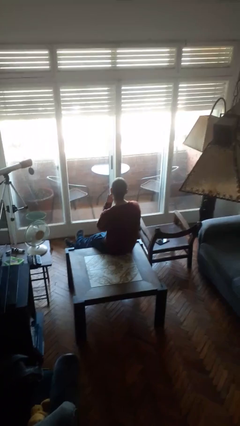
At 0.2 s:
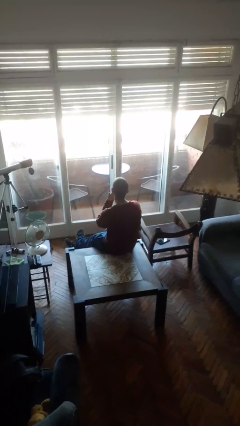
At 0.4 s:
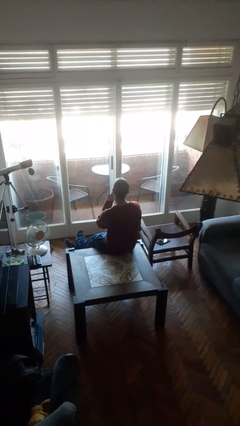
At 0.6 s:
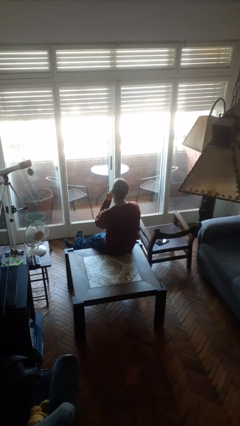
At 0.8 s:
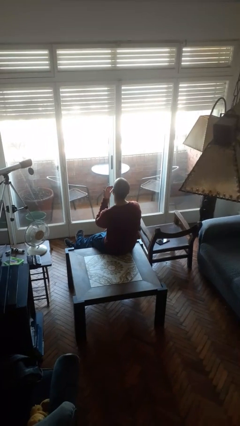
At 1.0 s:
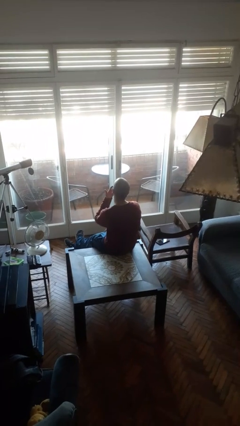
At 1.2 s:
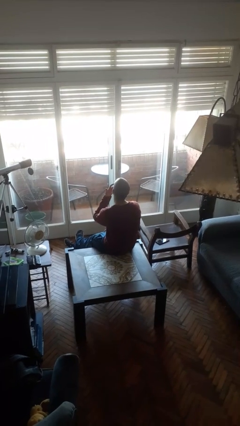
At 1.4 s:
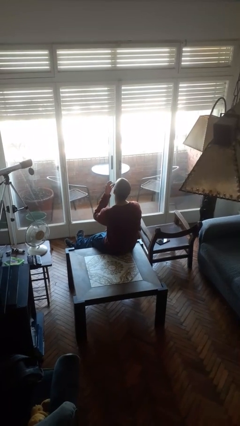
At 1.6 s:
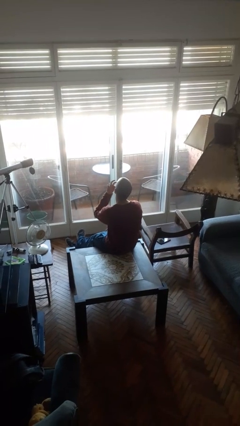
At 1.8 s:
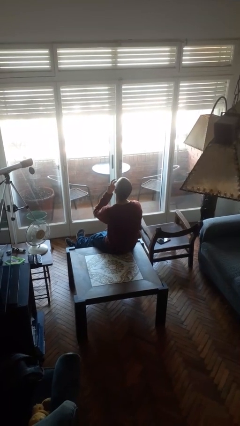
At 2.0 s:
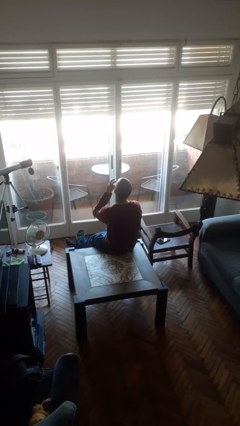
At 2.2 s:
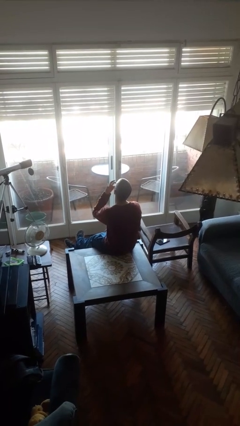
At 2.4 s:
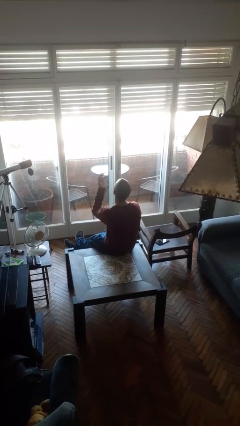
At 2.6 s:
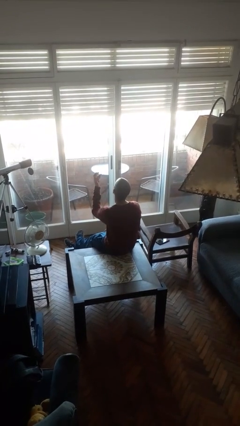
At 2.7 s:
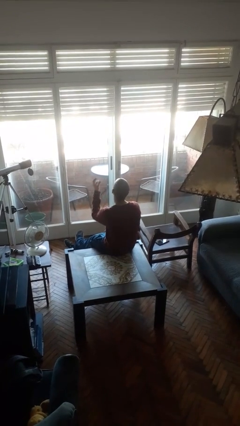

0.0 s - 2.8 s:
person licks fingers

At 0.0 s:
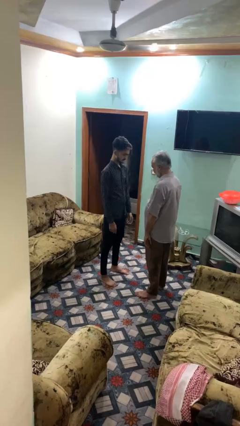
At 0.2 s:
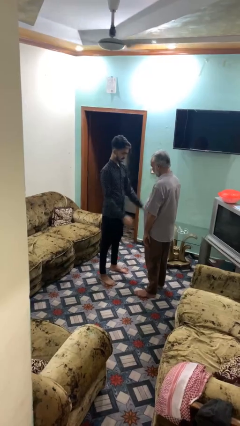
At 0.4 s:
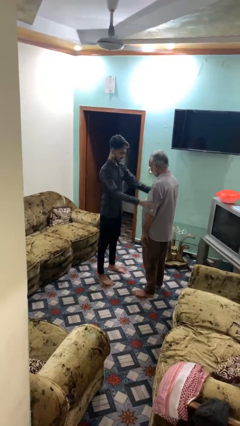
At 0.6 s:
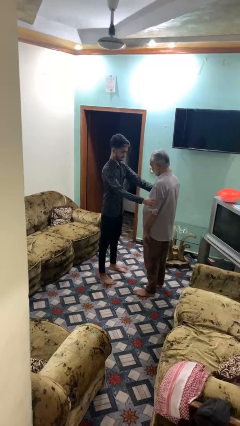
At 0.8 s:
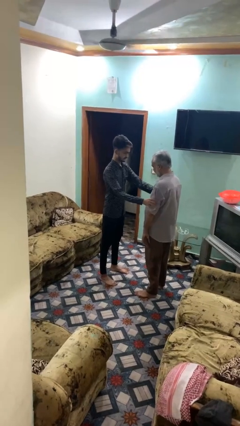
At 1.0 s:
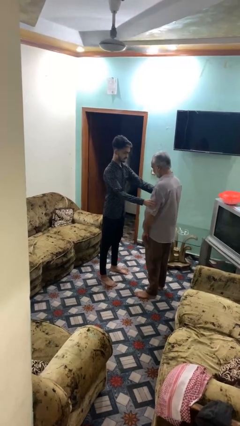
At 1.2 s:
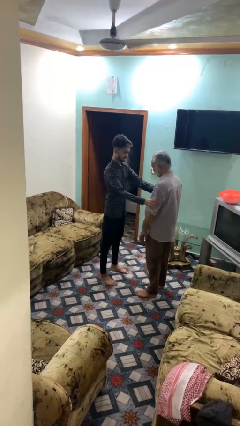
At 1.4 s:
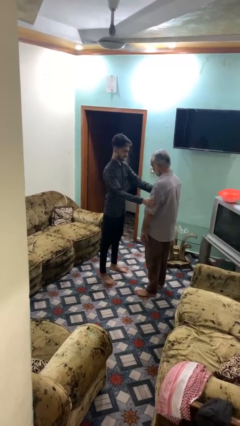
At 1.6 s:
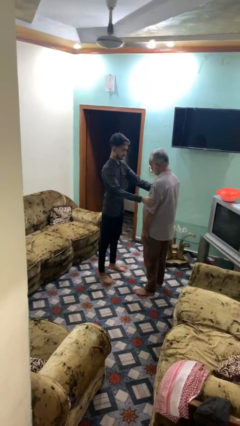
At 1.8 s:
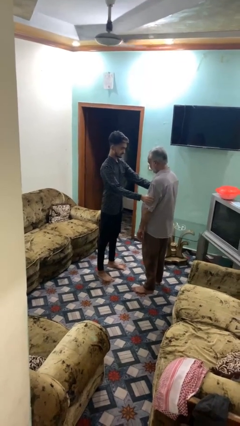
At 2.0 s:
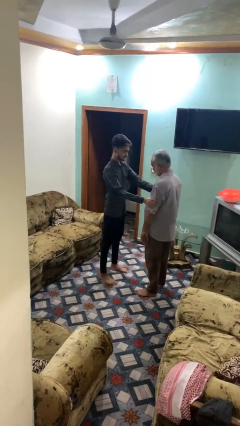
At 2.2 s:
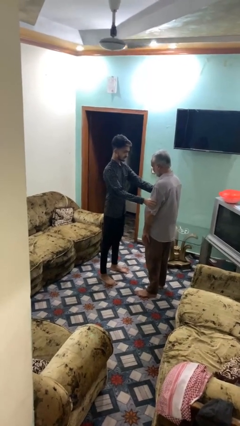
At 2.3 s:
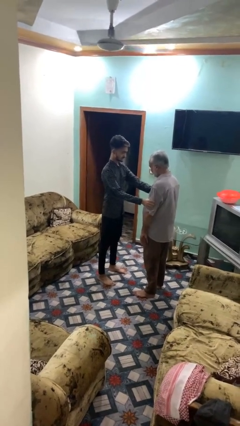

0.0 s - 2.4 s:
person grabs person by bicep

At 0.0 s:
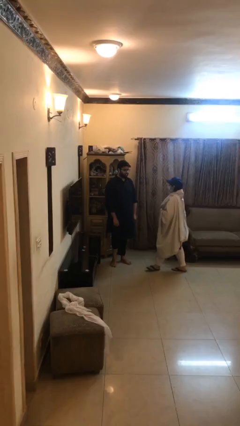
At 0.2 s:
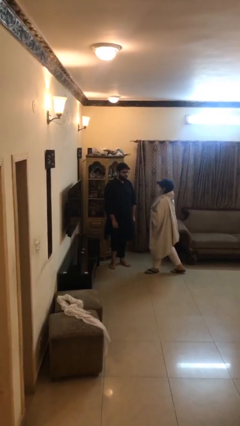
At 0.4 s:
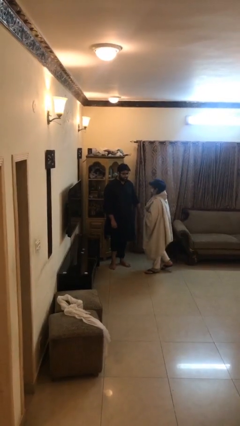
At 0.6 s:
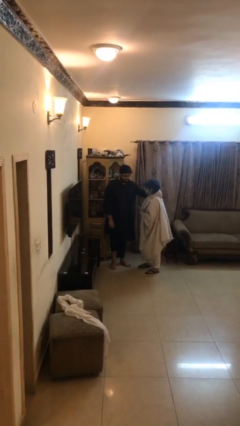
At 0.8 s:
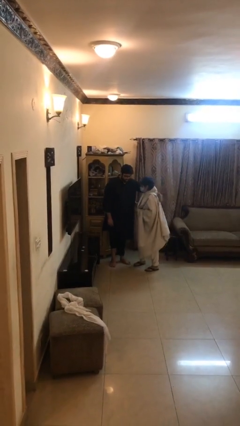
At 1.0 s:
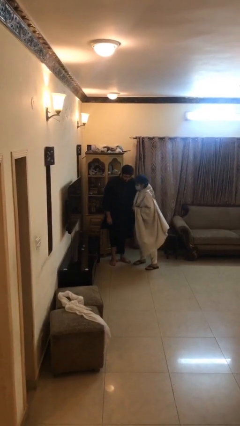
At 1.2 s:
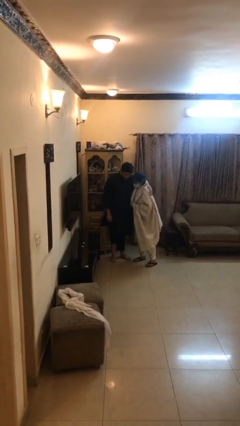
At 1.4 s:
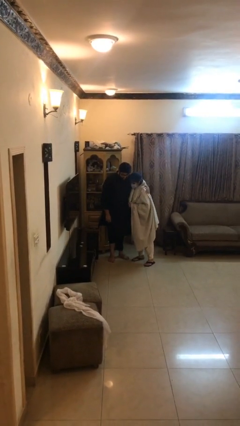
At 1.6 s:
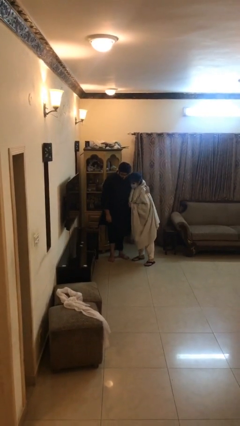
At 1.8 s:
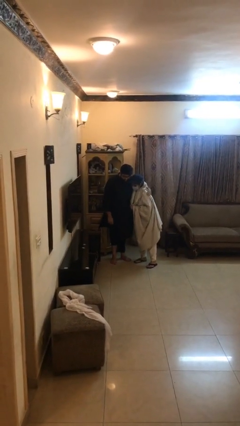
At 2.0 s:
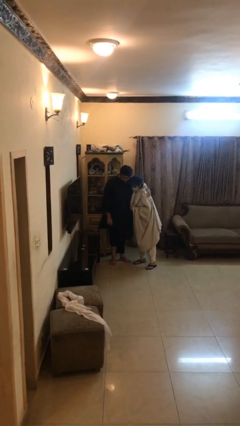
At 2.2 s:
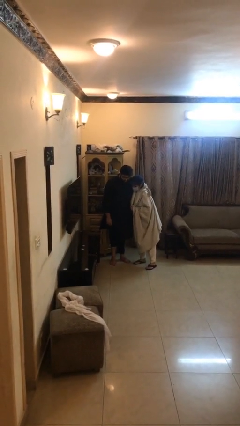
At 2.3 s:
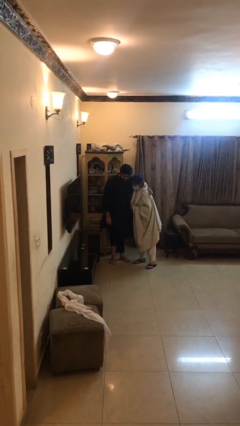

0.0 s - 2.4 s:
person embraces person

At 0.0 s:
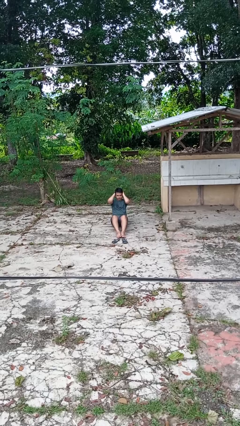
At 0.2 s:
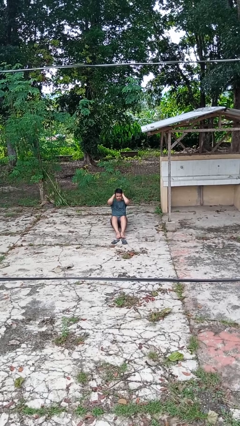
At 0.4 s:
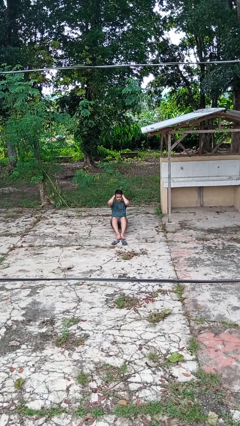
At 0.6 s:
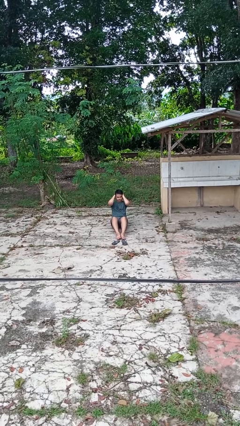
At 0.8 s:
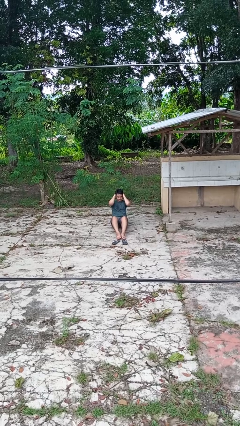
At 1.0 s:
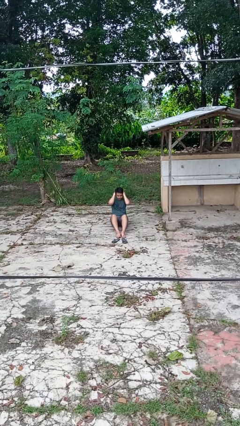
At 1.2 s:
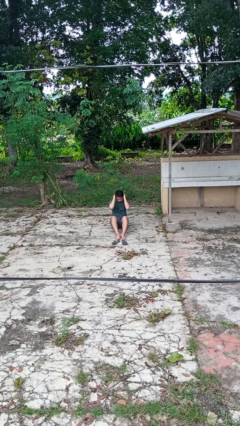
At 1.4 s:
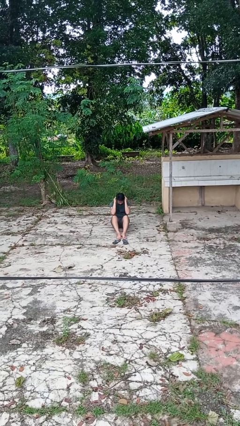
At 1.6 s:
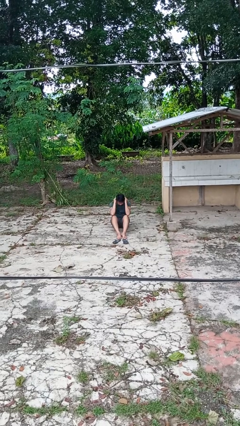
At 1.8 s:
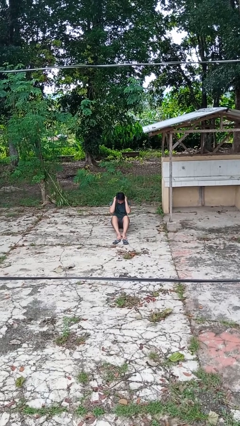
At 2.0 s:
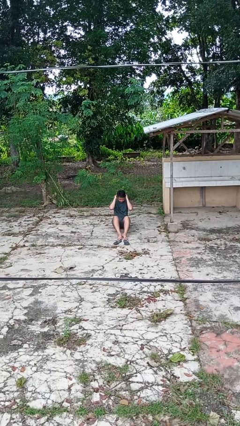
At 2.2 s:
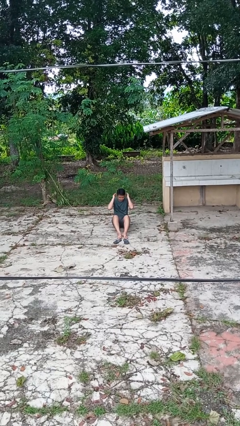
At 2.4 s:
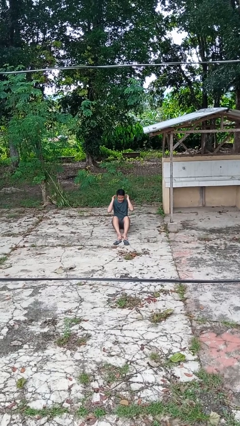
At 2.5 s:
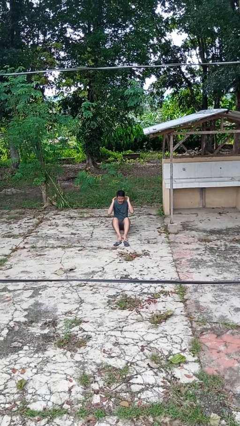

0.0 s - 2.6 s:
person exercises with situp

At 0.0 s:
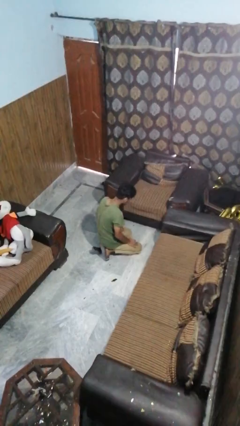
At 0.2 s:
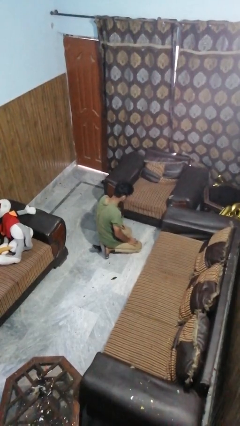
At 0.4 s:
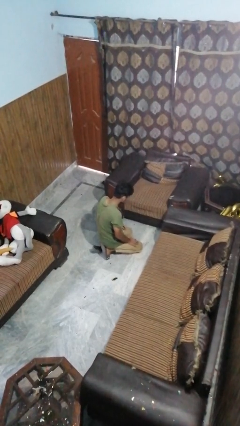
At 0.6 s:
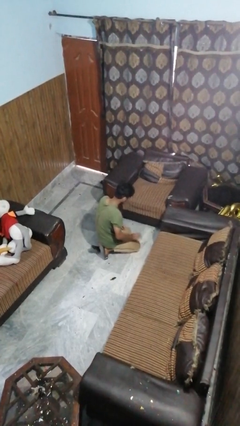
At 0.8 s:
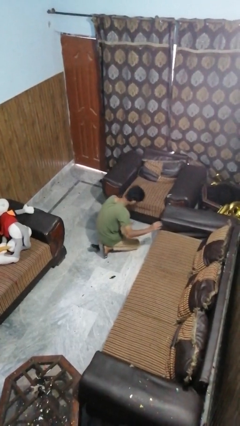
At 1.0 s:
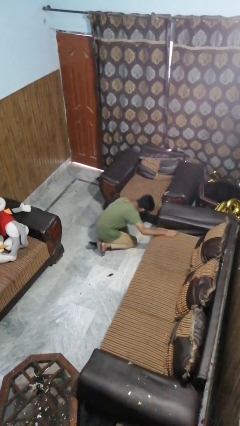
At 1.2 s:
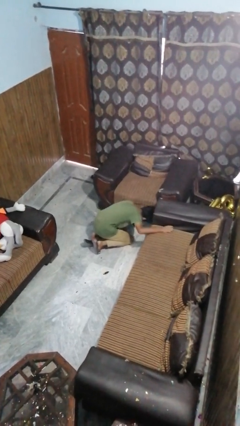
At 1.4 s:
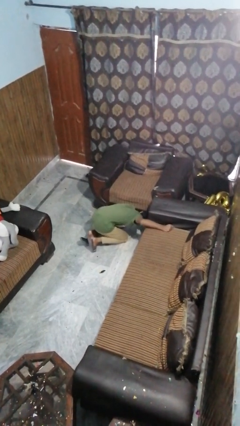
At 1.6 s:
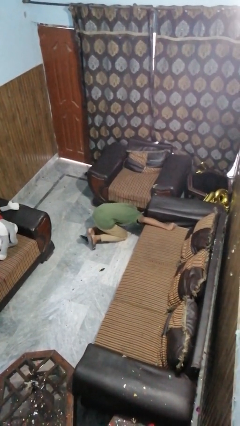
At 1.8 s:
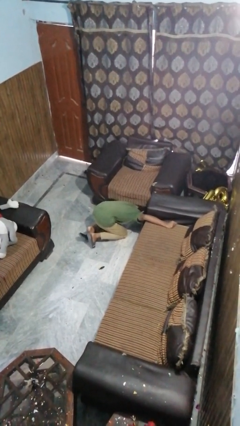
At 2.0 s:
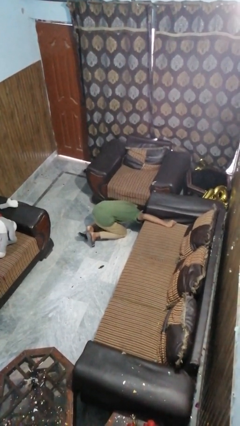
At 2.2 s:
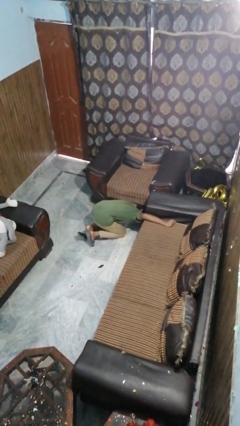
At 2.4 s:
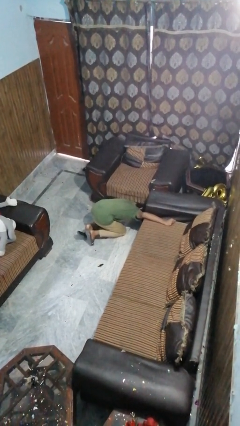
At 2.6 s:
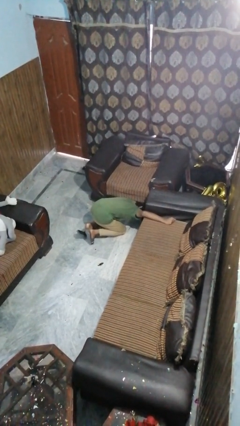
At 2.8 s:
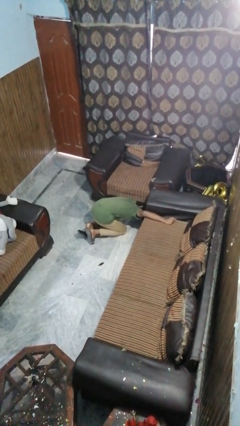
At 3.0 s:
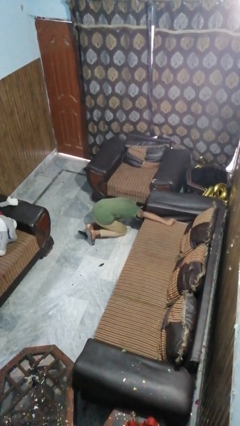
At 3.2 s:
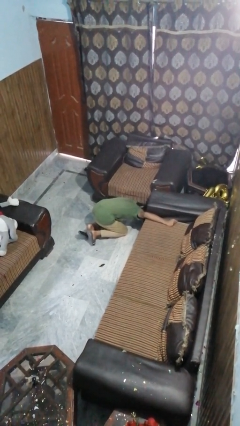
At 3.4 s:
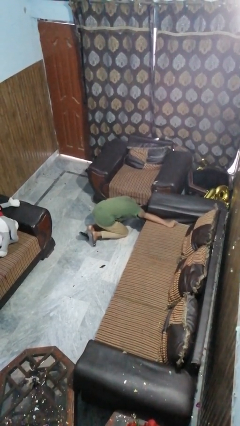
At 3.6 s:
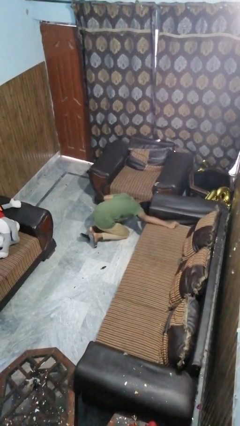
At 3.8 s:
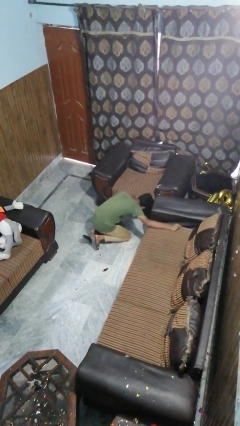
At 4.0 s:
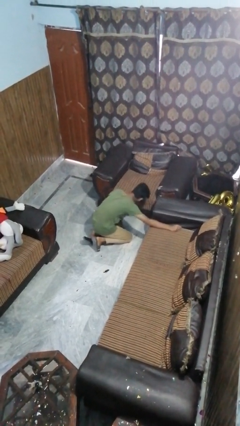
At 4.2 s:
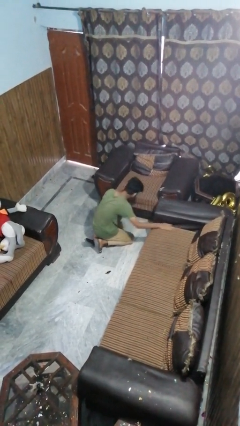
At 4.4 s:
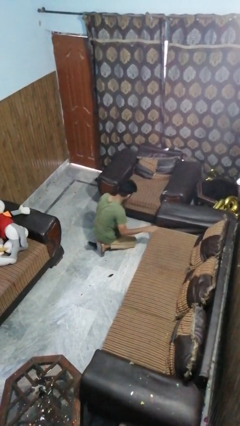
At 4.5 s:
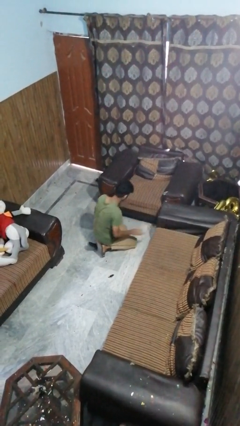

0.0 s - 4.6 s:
person searches under couch

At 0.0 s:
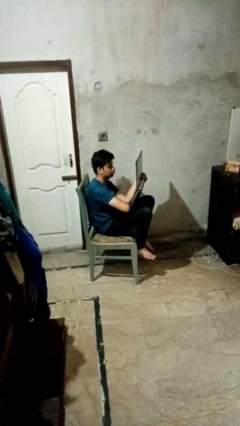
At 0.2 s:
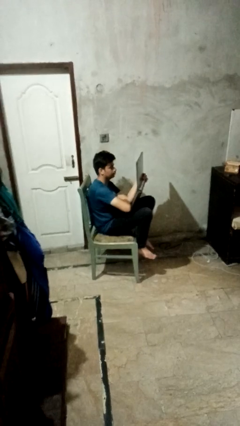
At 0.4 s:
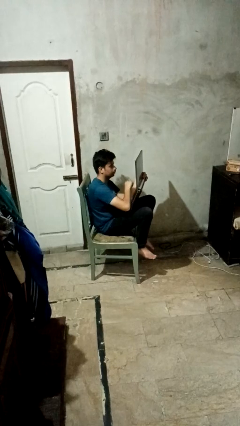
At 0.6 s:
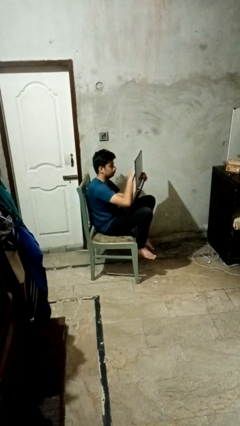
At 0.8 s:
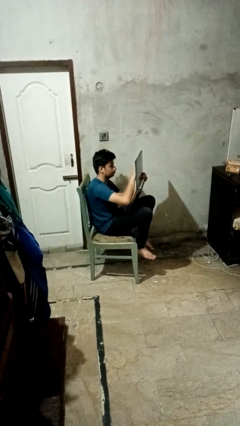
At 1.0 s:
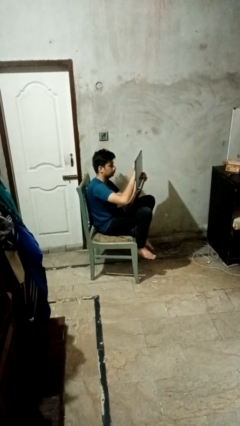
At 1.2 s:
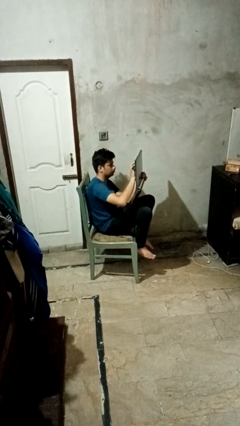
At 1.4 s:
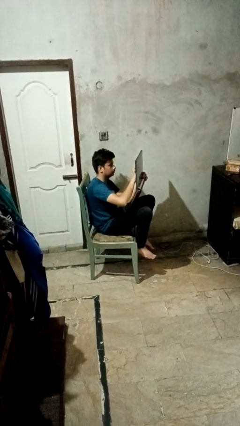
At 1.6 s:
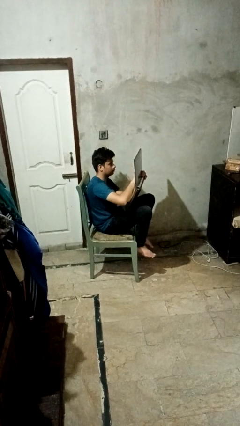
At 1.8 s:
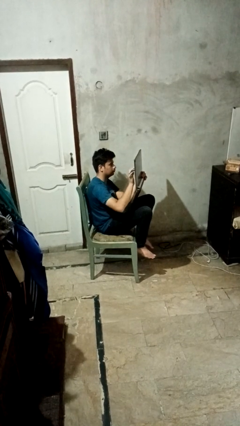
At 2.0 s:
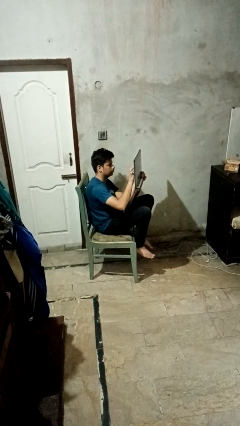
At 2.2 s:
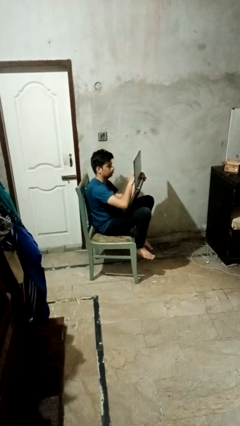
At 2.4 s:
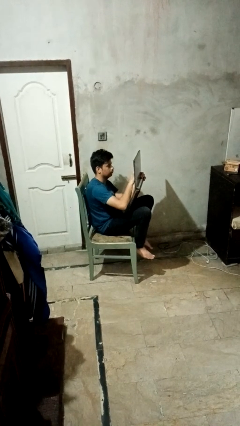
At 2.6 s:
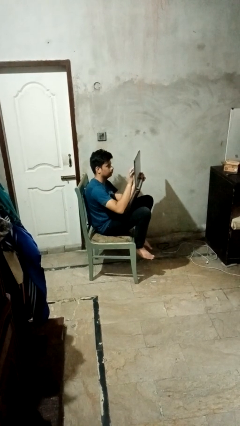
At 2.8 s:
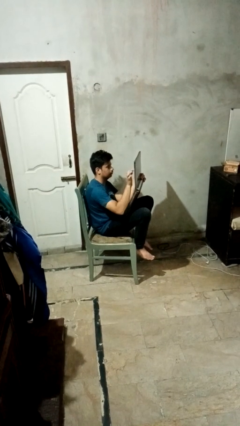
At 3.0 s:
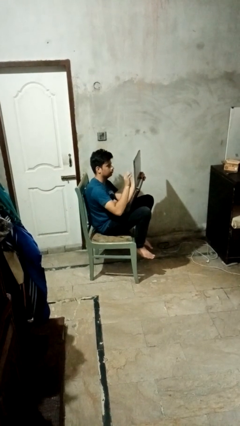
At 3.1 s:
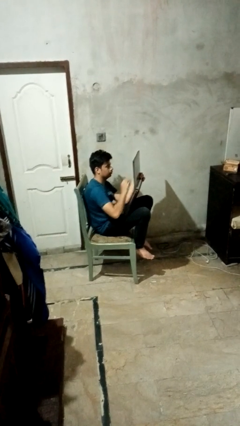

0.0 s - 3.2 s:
person interacts with tablet
